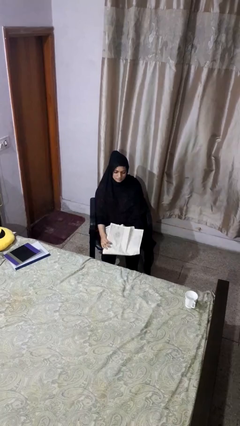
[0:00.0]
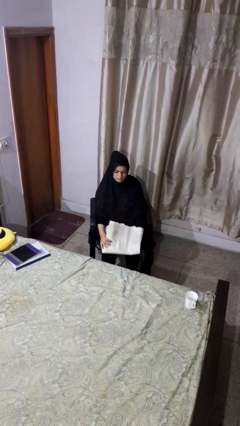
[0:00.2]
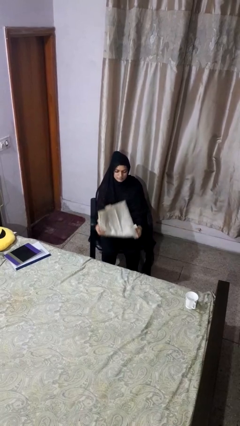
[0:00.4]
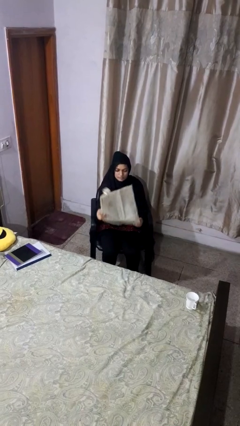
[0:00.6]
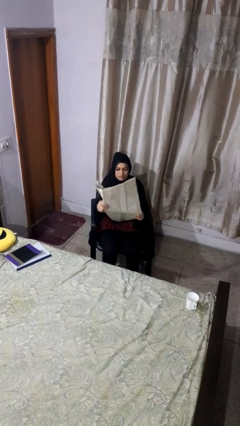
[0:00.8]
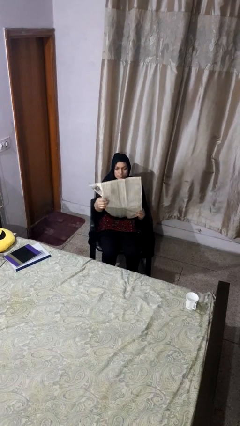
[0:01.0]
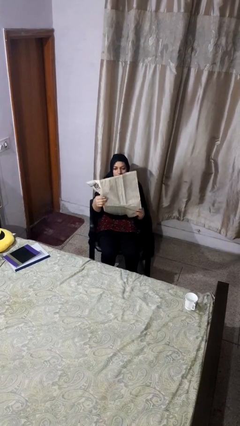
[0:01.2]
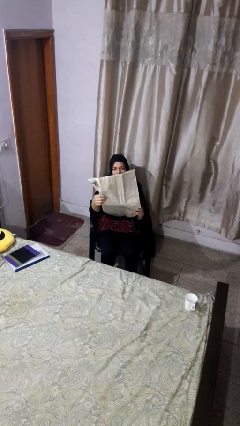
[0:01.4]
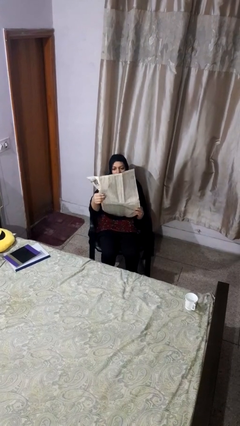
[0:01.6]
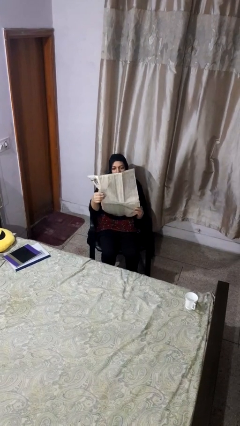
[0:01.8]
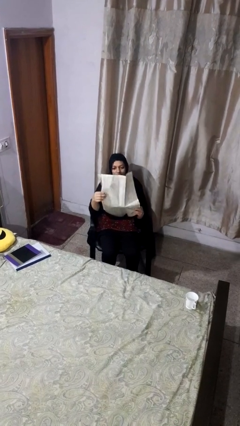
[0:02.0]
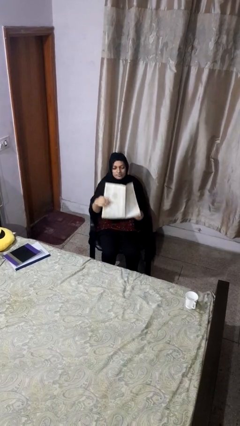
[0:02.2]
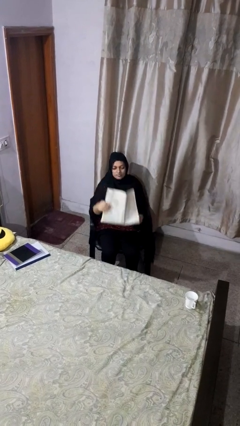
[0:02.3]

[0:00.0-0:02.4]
person reads newspaper

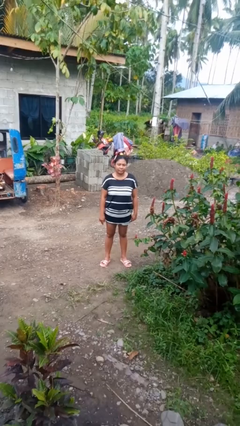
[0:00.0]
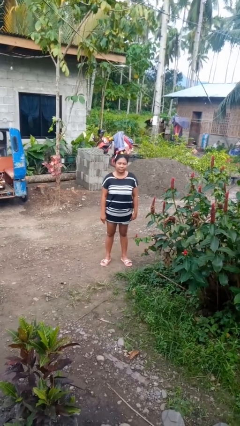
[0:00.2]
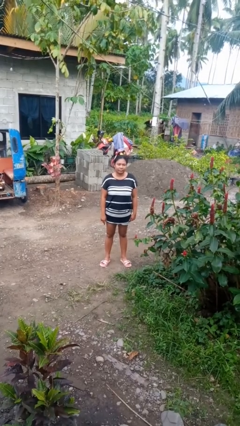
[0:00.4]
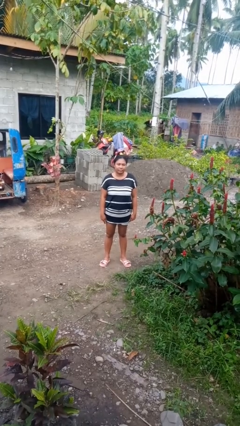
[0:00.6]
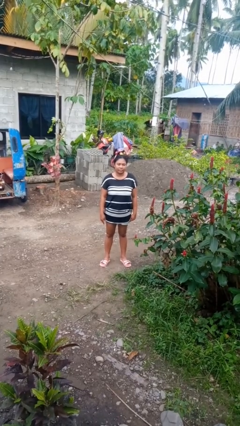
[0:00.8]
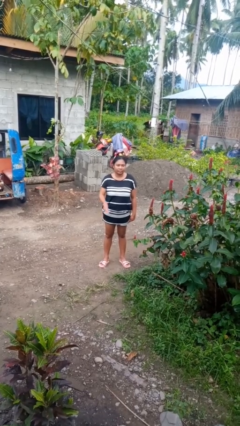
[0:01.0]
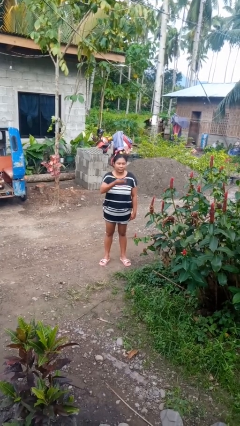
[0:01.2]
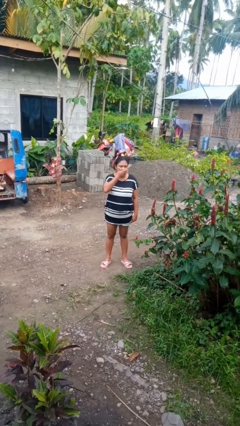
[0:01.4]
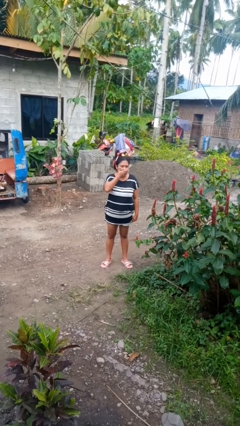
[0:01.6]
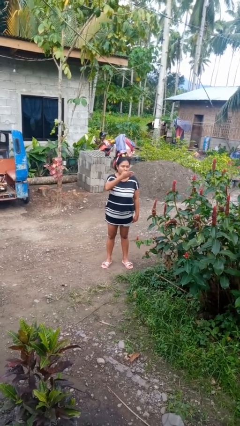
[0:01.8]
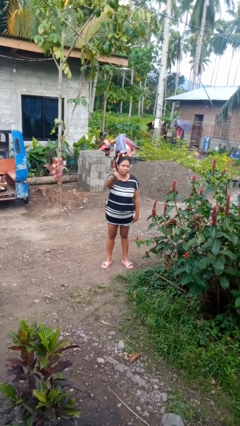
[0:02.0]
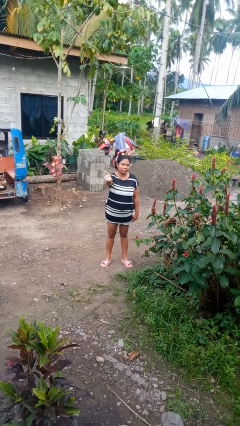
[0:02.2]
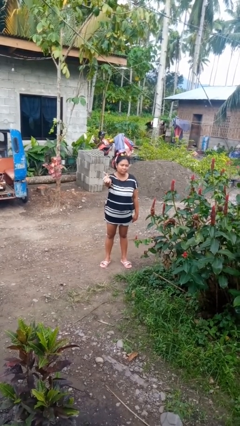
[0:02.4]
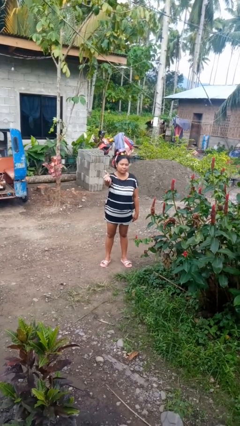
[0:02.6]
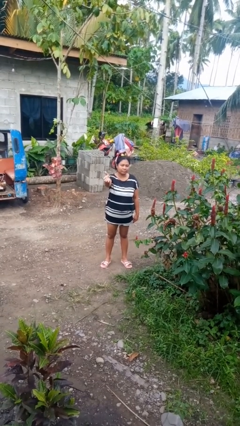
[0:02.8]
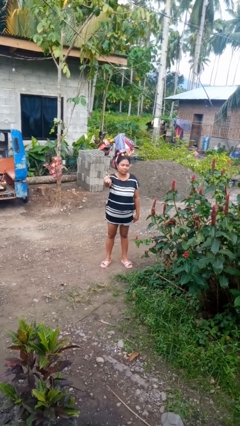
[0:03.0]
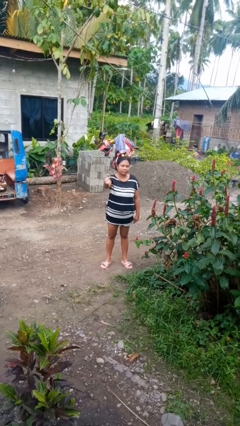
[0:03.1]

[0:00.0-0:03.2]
person gestures blow kiss

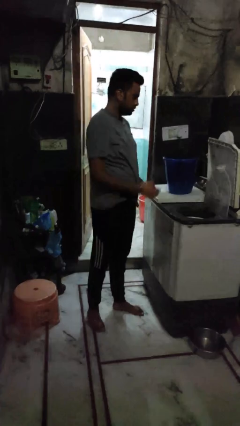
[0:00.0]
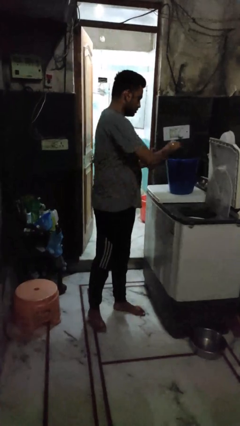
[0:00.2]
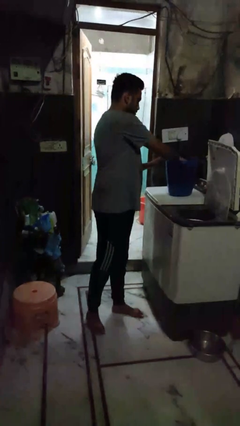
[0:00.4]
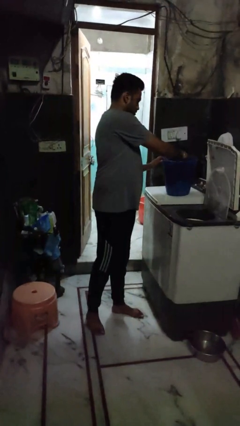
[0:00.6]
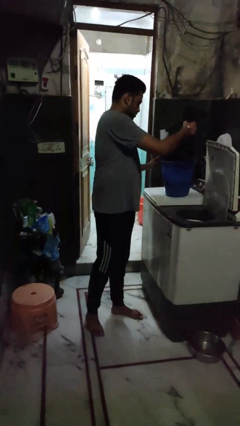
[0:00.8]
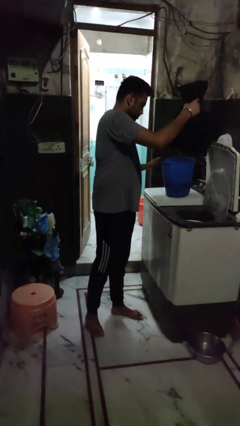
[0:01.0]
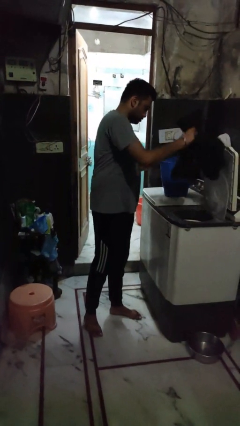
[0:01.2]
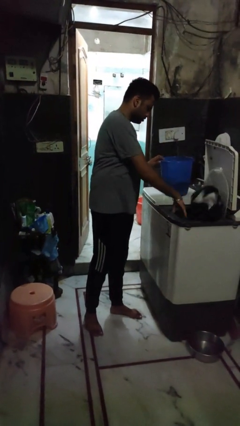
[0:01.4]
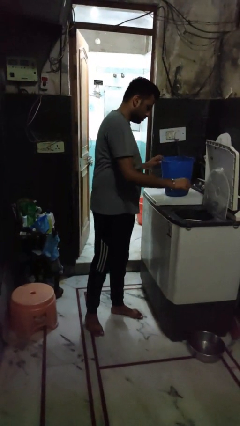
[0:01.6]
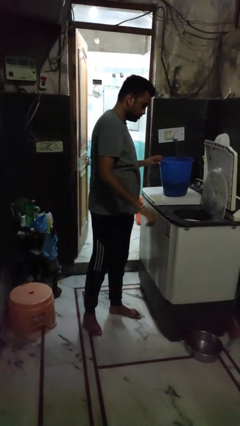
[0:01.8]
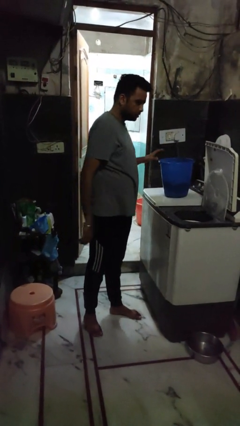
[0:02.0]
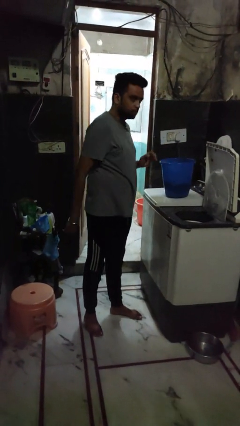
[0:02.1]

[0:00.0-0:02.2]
person loads dryer

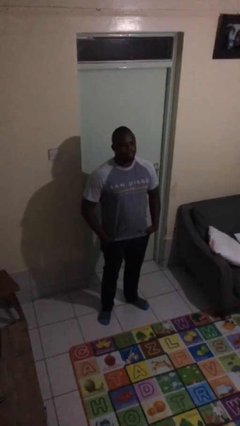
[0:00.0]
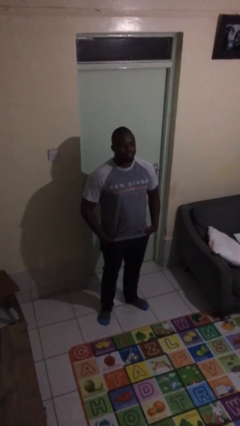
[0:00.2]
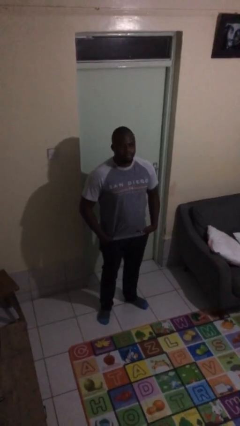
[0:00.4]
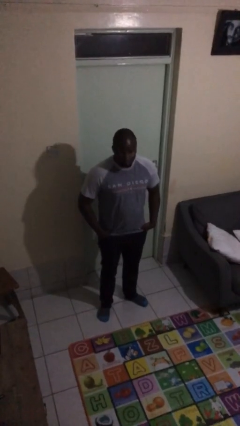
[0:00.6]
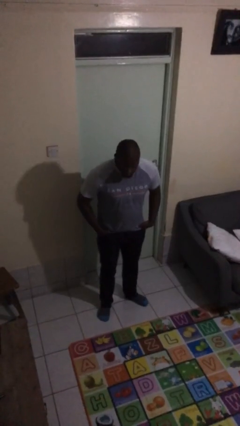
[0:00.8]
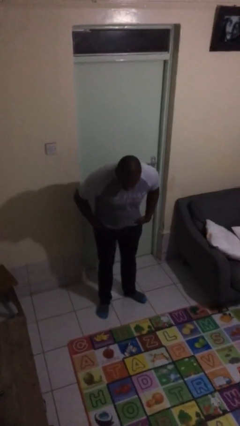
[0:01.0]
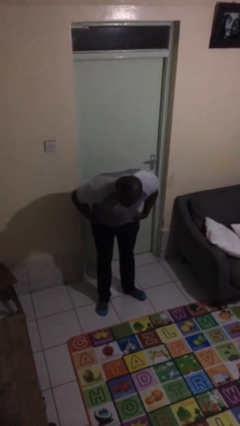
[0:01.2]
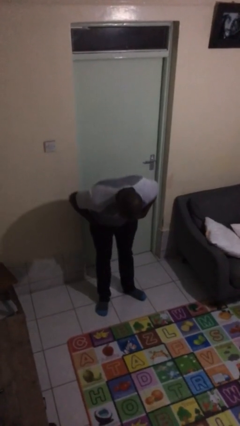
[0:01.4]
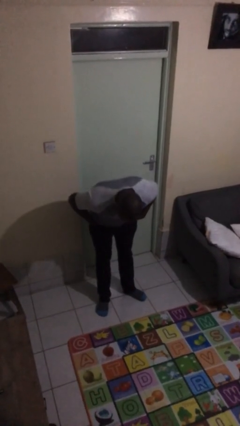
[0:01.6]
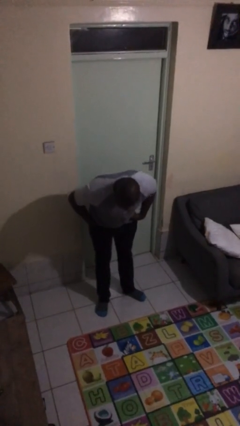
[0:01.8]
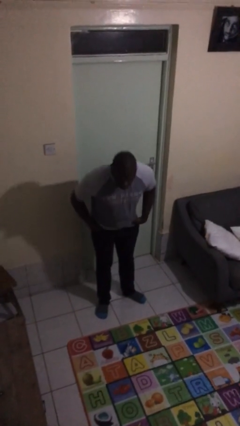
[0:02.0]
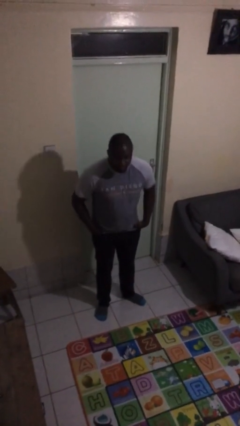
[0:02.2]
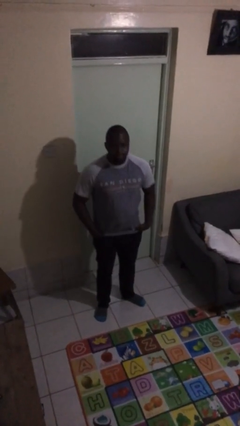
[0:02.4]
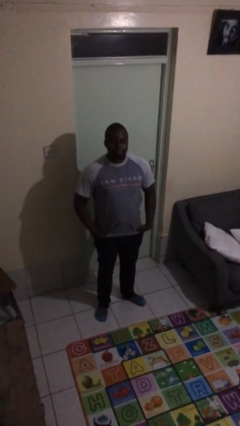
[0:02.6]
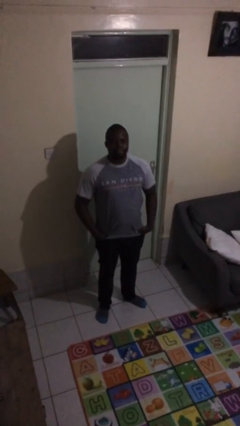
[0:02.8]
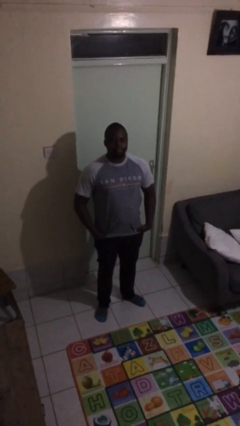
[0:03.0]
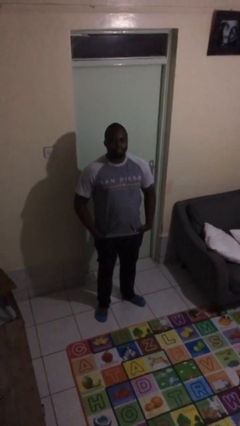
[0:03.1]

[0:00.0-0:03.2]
person bows

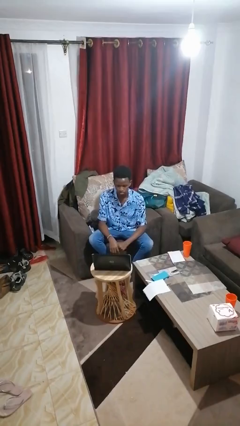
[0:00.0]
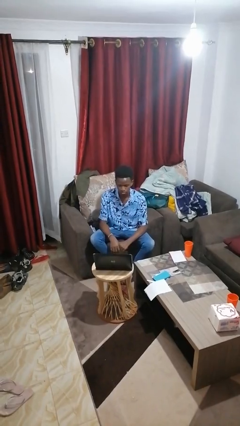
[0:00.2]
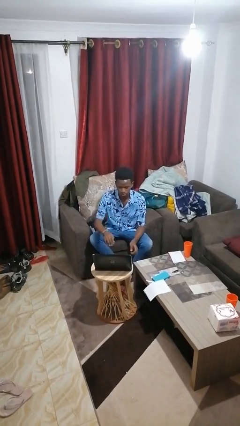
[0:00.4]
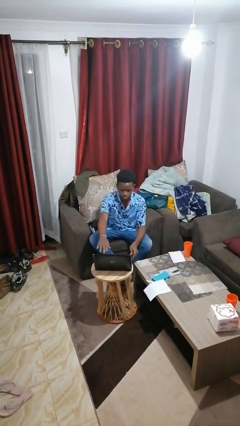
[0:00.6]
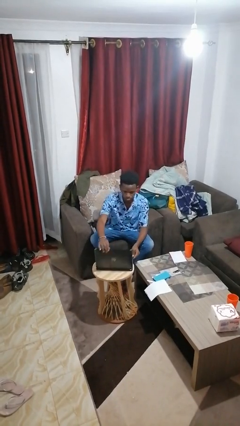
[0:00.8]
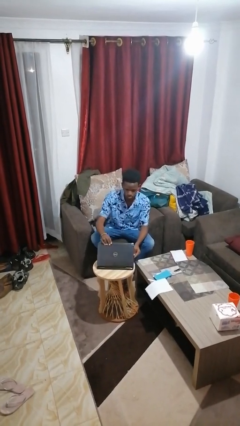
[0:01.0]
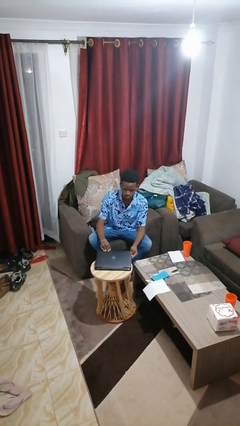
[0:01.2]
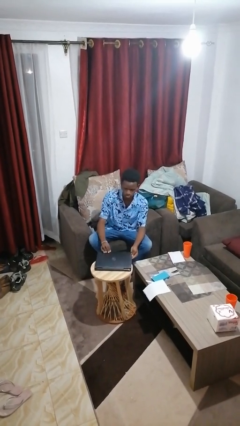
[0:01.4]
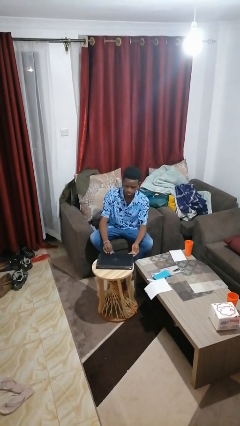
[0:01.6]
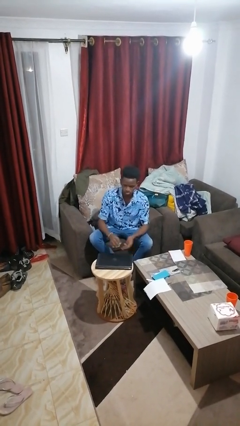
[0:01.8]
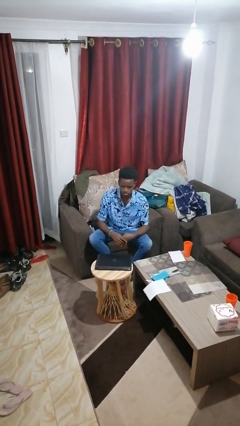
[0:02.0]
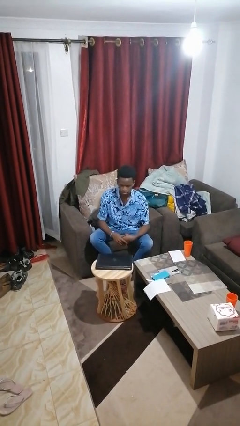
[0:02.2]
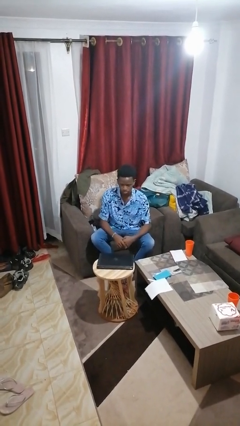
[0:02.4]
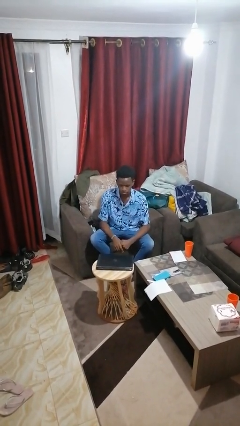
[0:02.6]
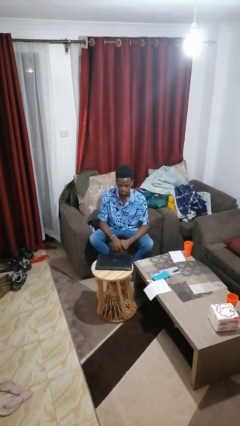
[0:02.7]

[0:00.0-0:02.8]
person closes laptop

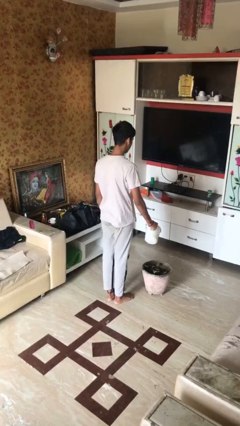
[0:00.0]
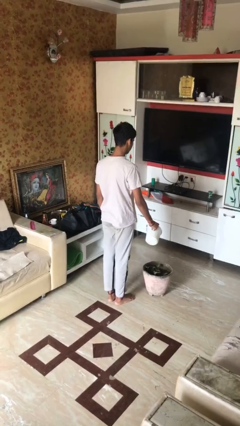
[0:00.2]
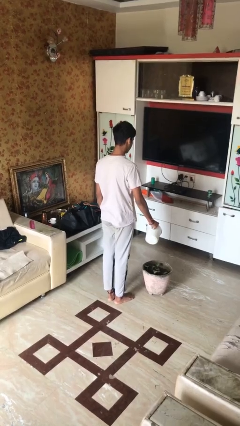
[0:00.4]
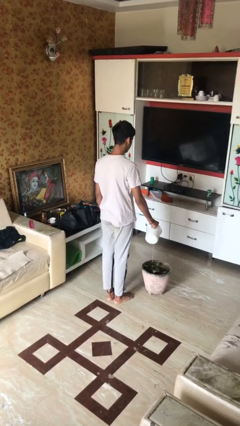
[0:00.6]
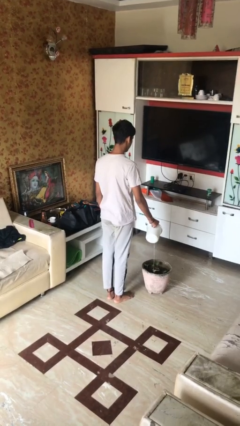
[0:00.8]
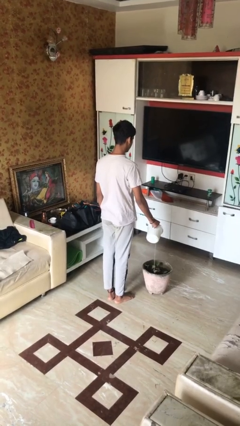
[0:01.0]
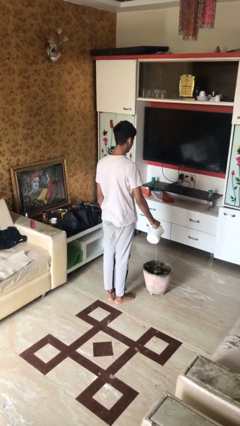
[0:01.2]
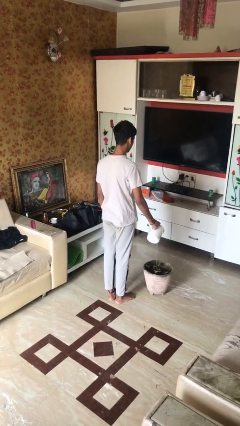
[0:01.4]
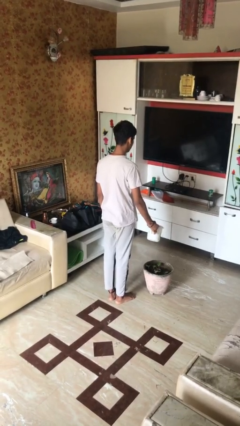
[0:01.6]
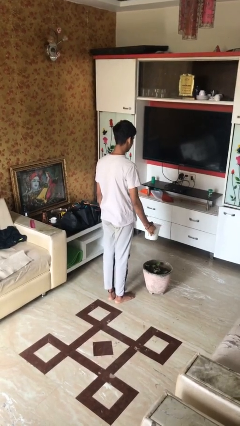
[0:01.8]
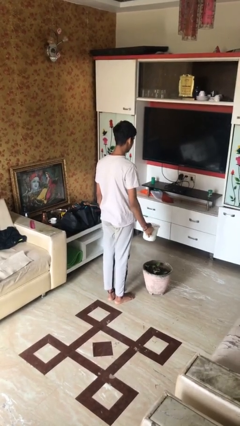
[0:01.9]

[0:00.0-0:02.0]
person waters houseplant

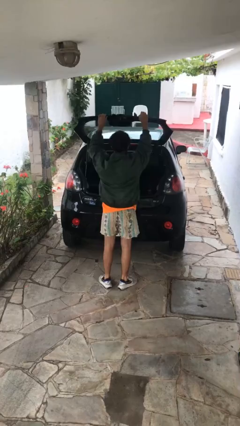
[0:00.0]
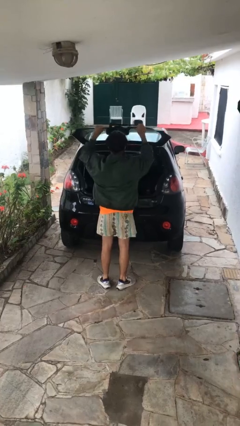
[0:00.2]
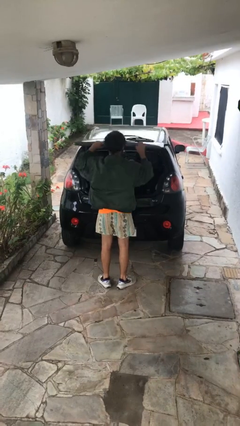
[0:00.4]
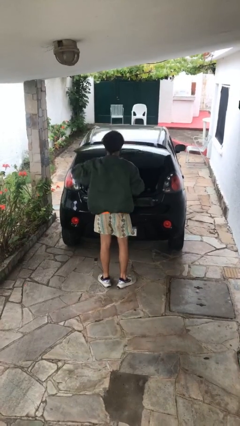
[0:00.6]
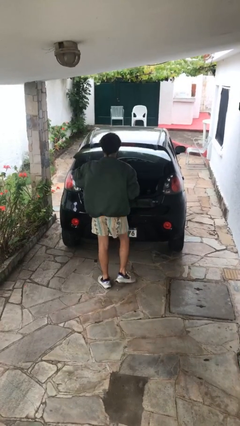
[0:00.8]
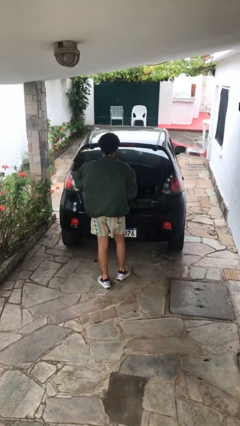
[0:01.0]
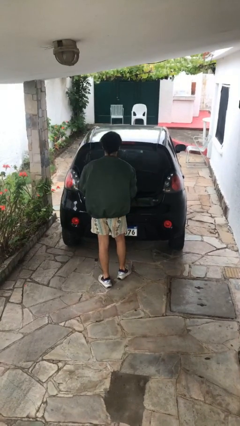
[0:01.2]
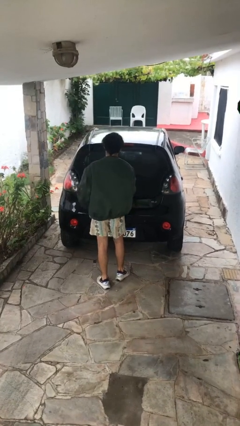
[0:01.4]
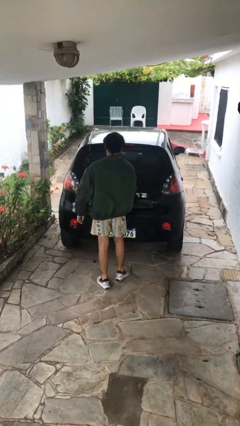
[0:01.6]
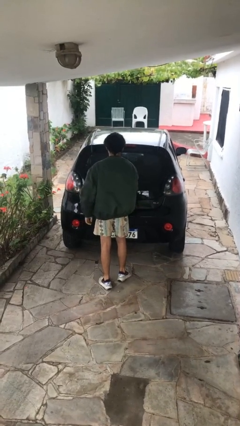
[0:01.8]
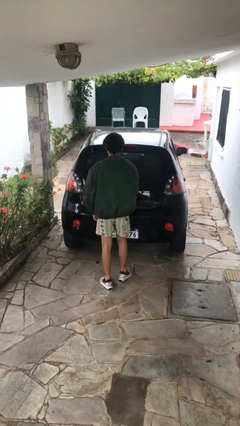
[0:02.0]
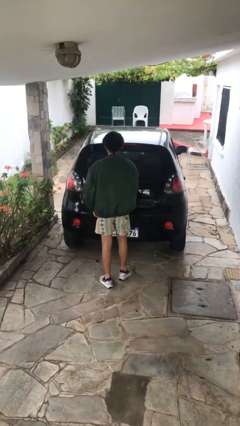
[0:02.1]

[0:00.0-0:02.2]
person closes car trunk
